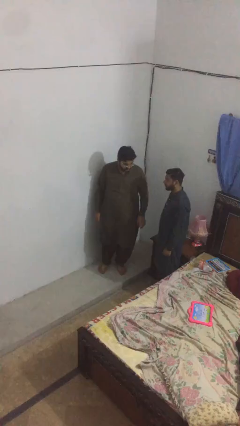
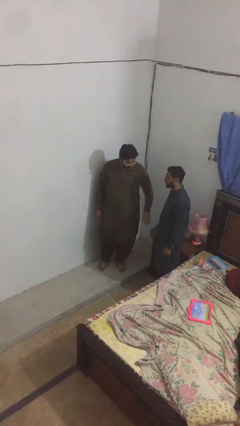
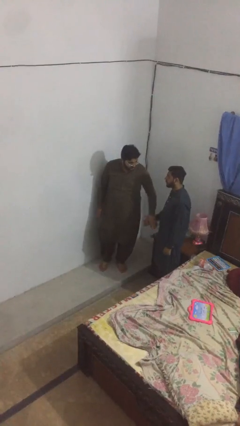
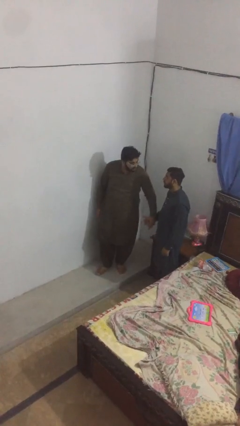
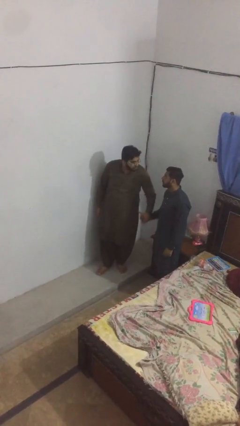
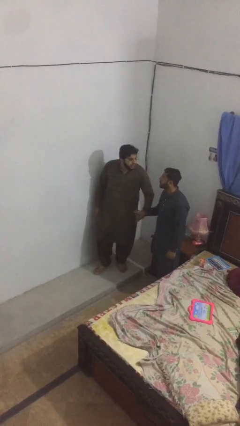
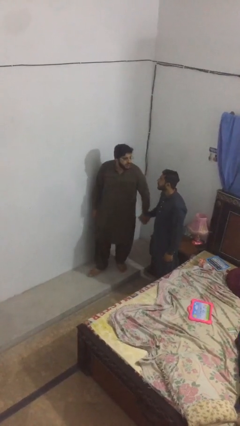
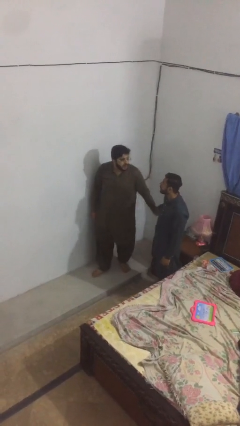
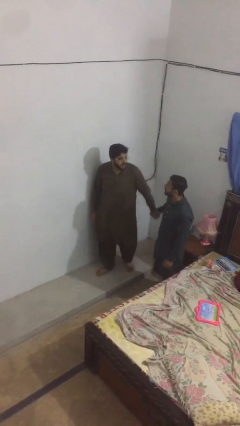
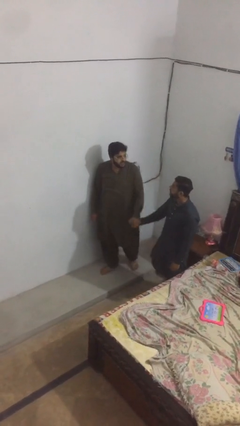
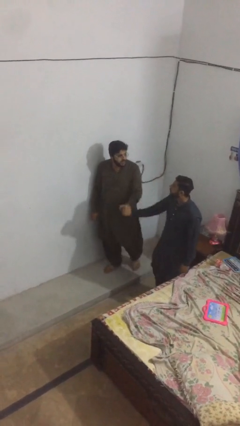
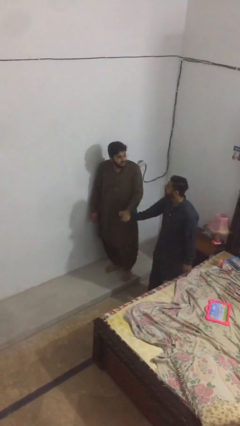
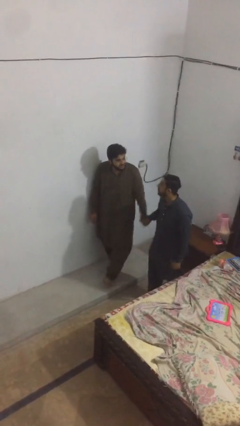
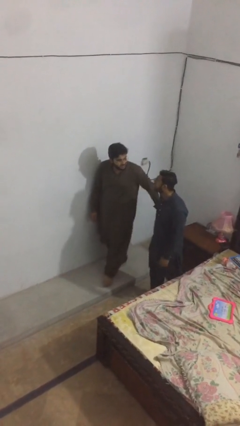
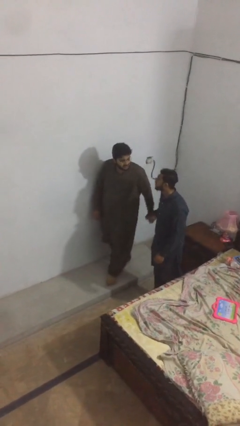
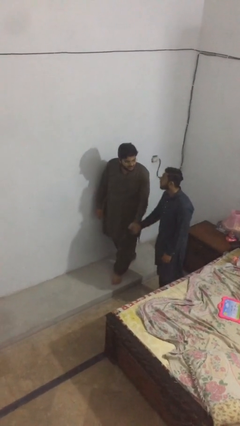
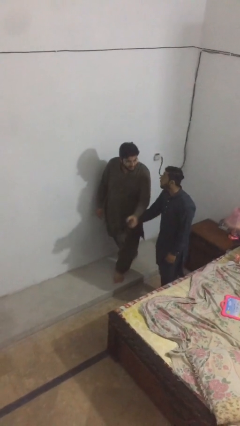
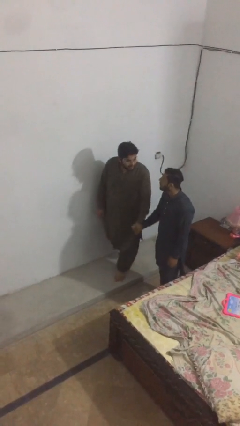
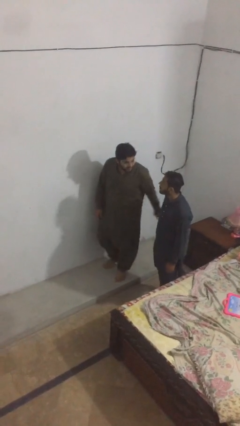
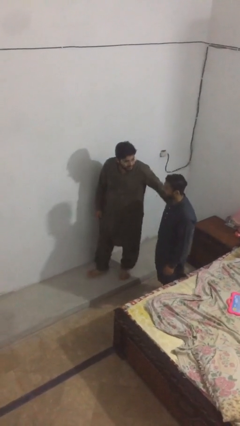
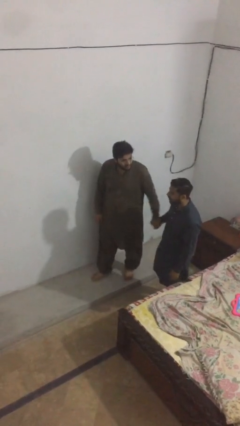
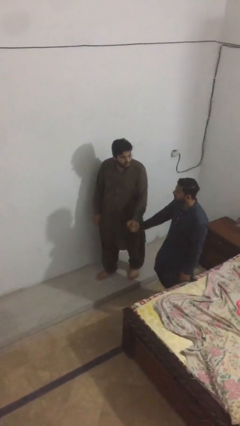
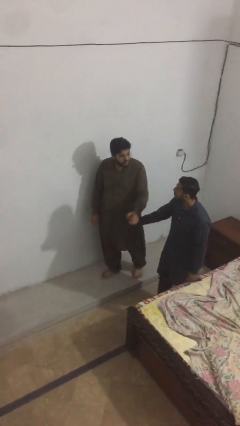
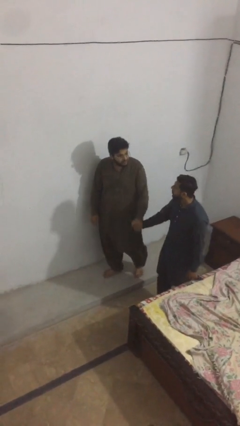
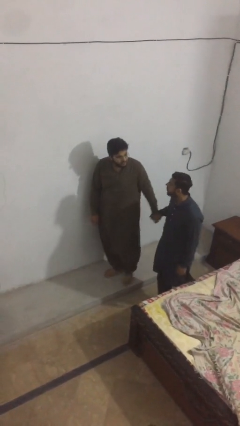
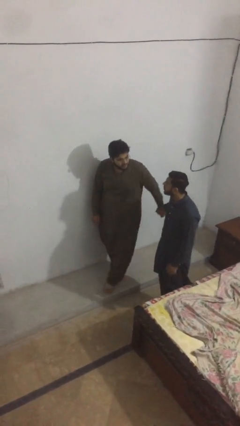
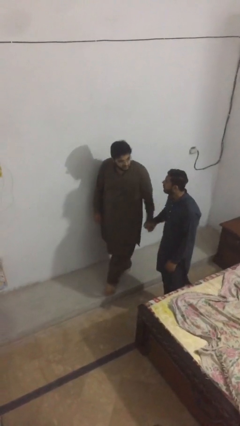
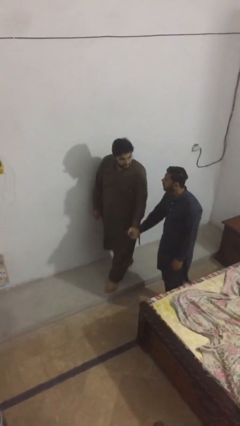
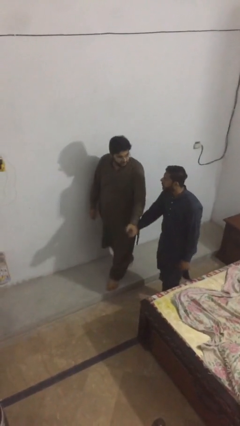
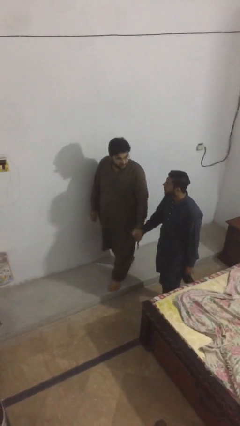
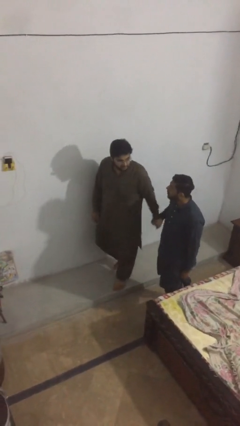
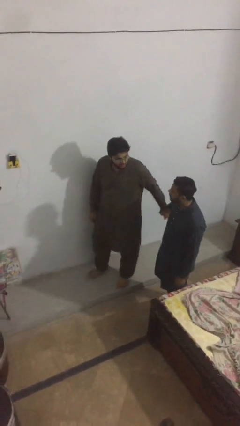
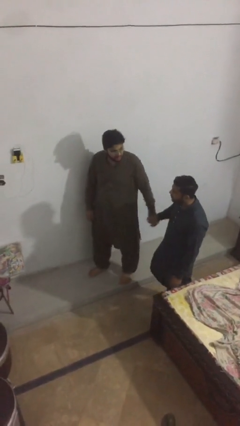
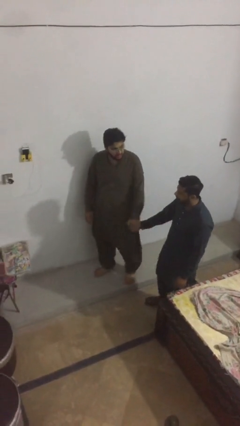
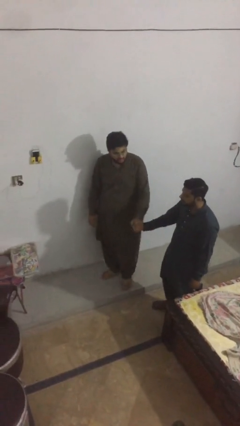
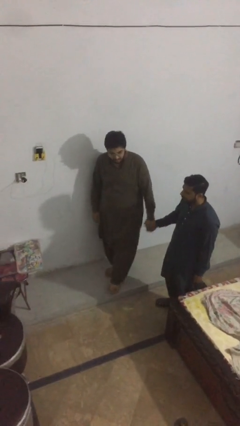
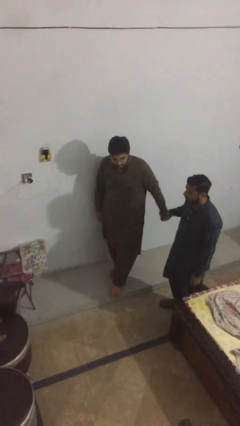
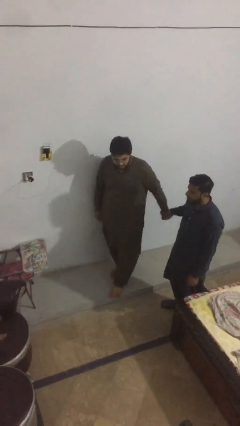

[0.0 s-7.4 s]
person holds hand

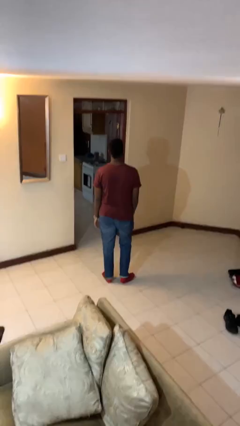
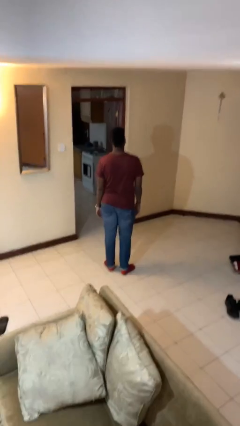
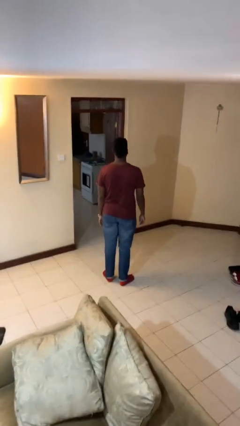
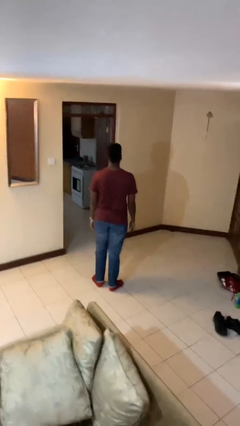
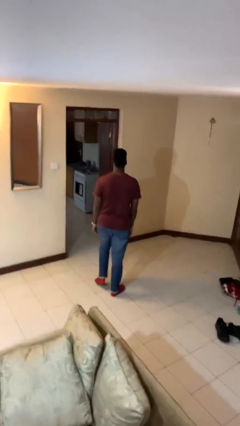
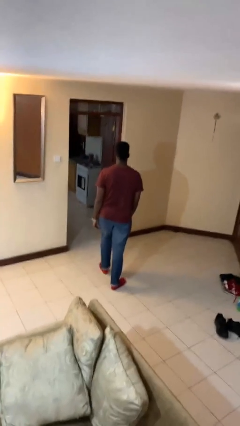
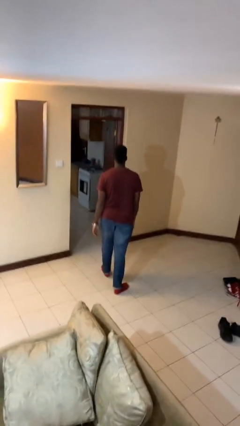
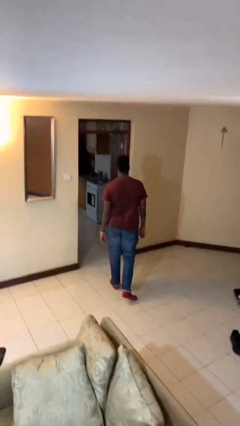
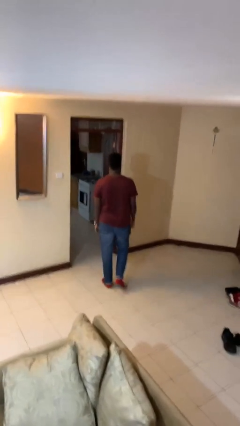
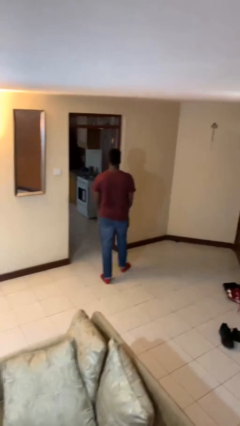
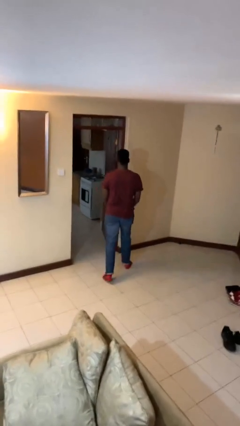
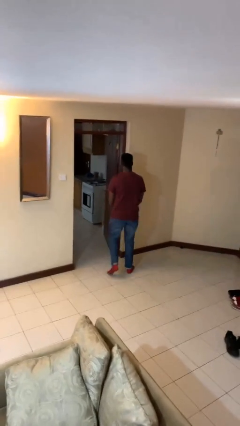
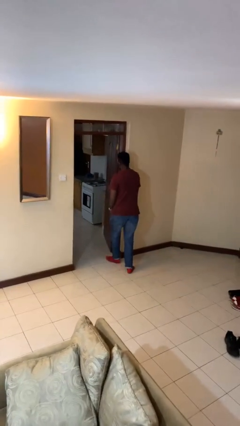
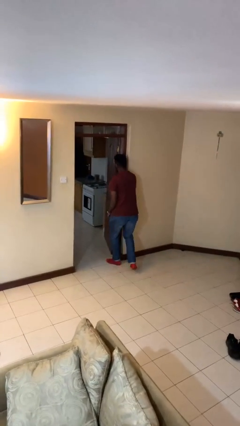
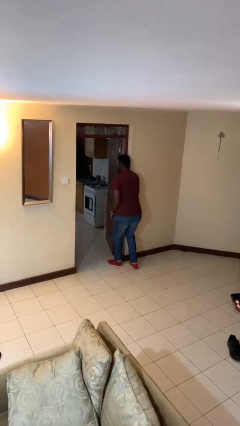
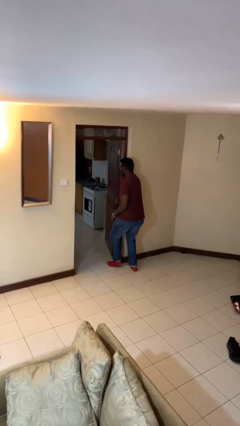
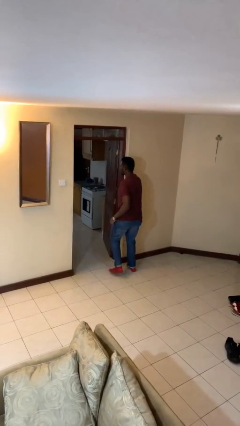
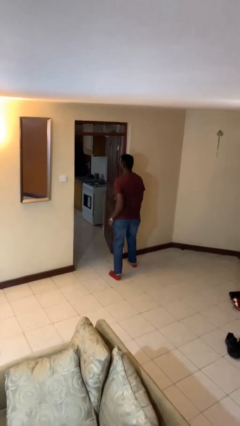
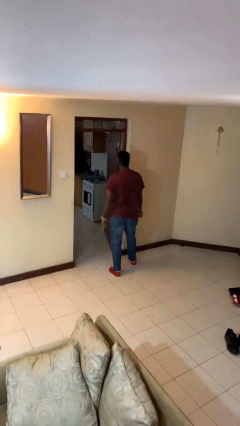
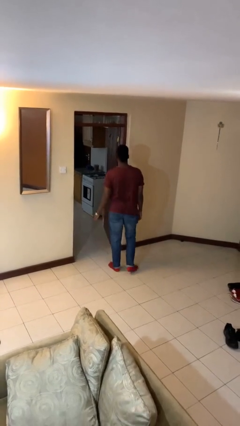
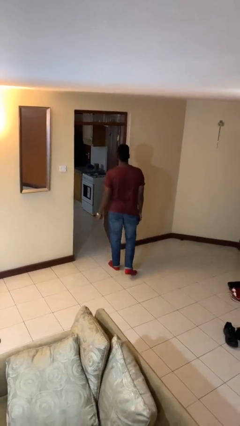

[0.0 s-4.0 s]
person bumps into wall

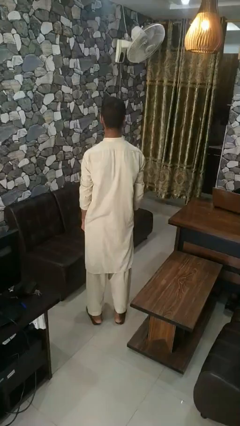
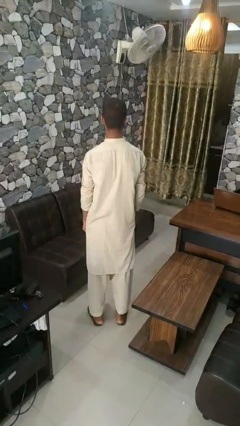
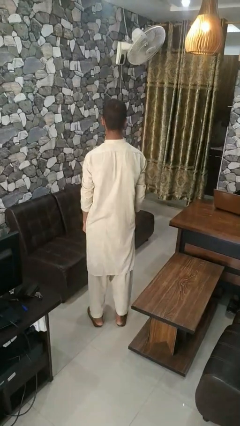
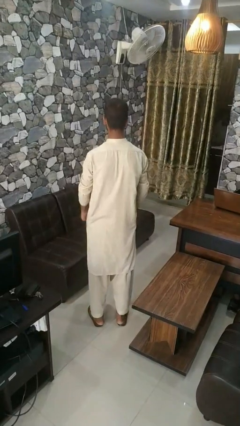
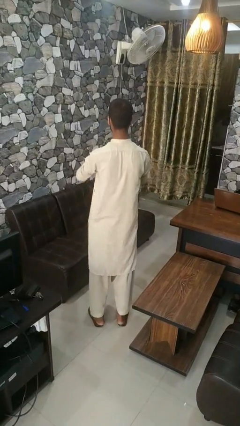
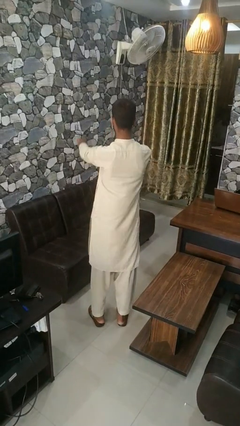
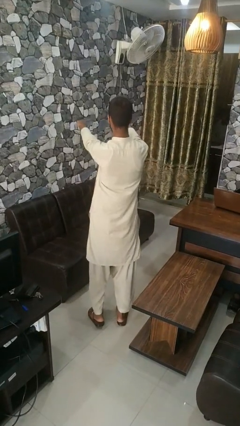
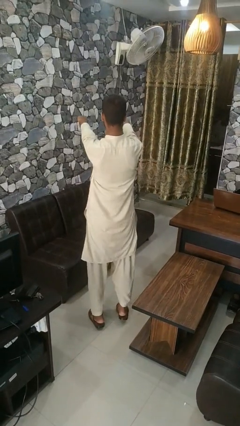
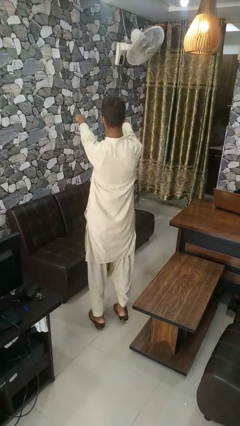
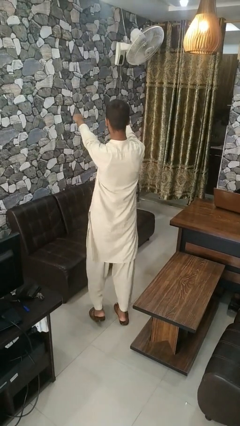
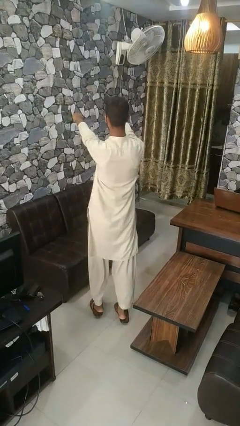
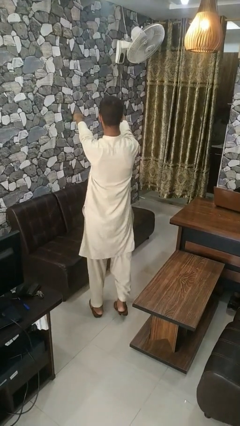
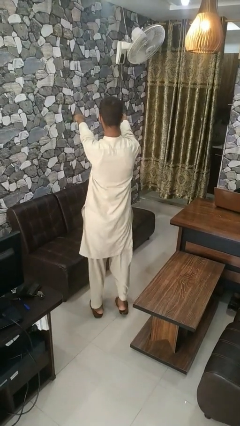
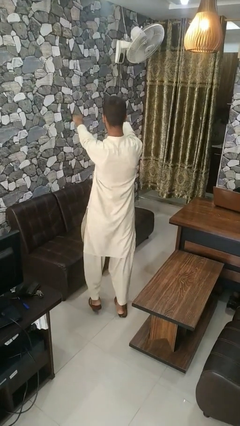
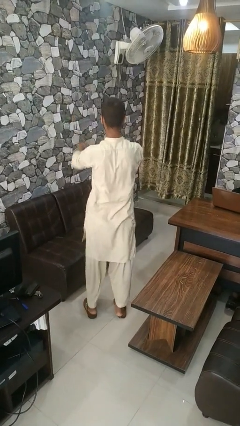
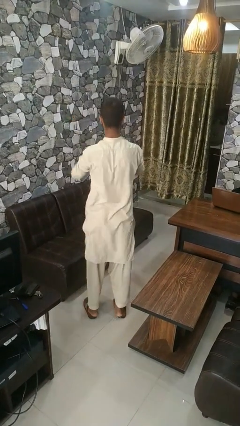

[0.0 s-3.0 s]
person walks tiptoe

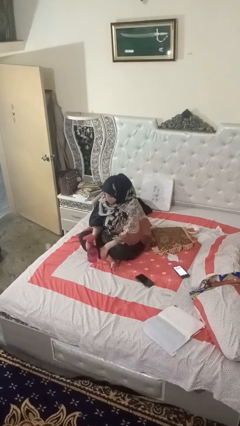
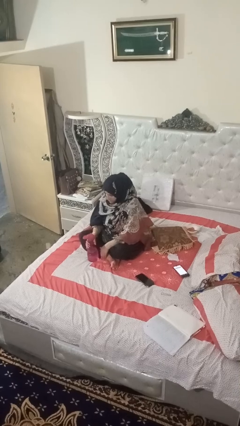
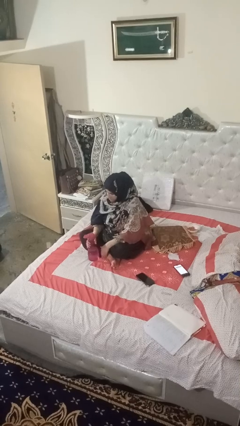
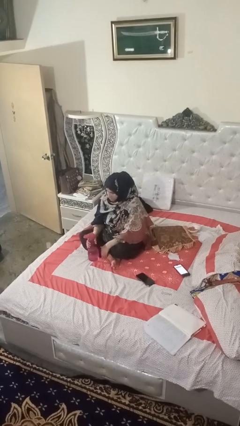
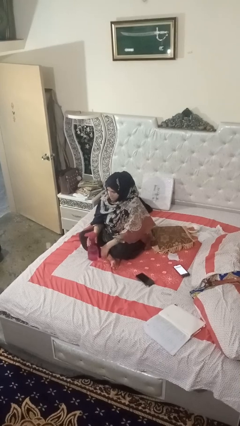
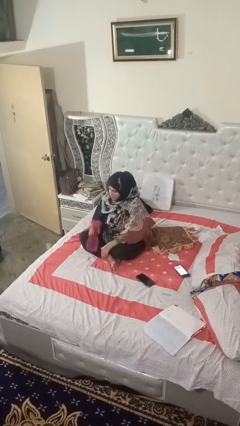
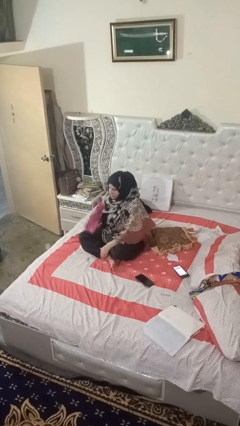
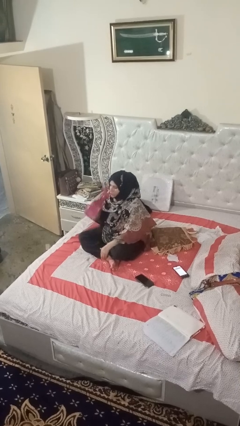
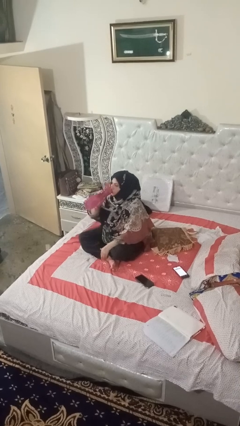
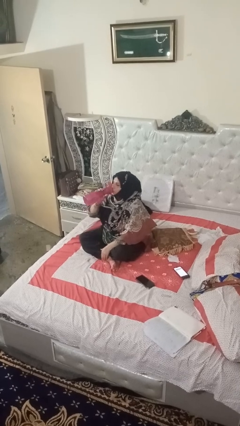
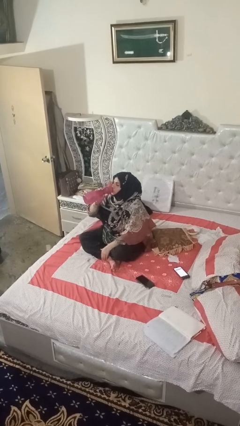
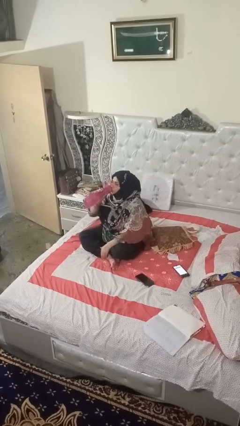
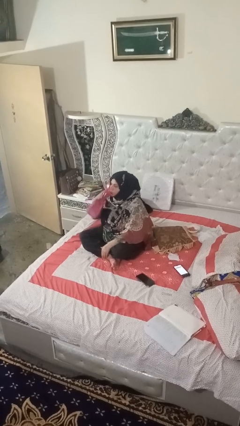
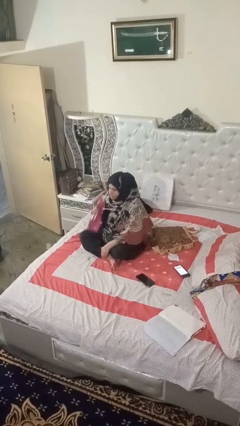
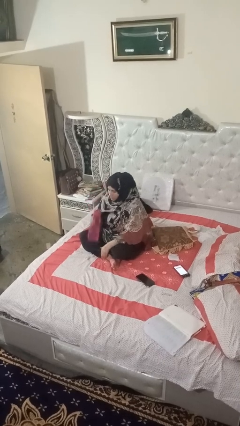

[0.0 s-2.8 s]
person drinks from bottle

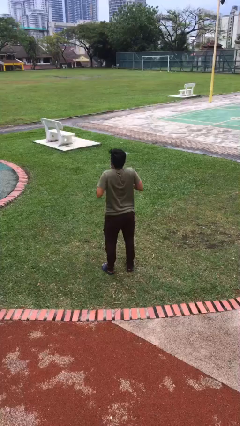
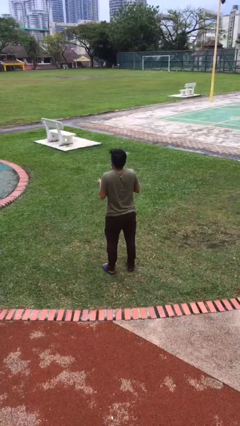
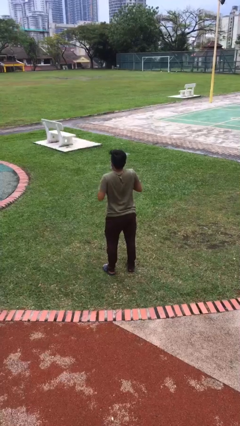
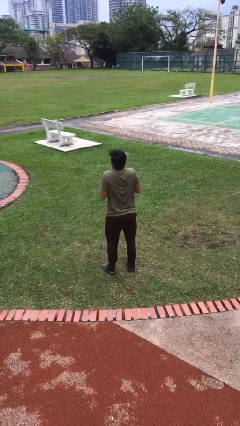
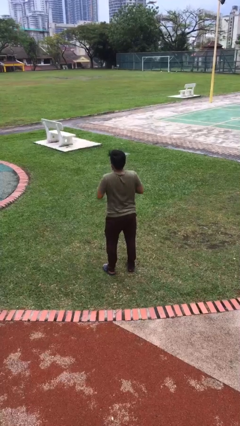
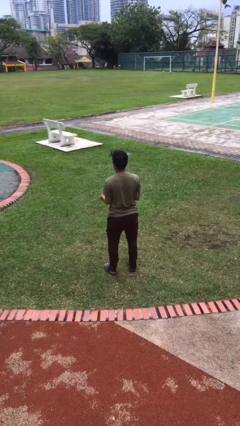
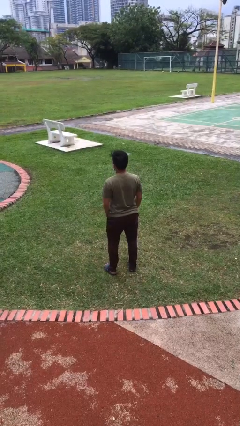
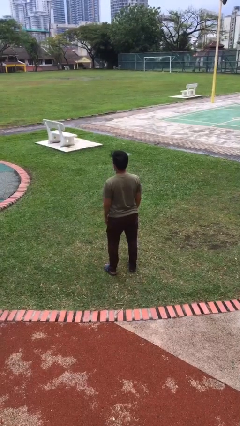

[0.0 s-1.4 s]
person shrugs
